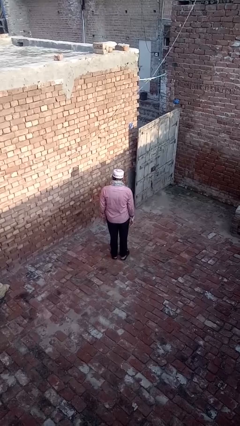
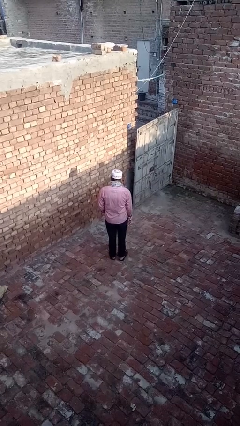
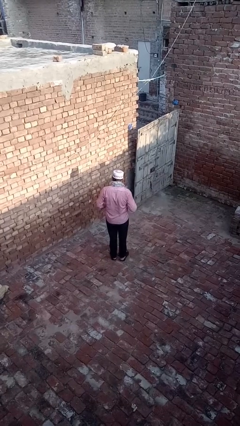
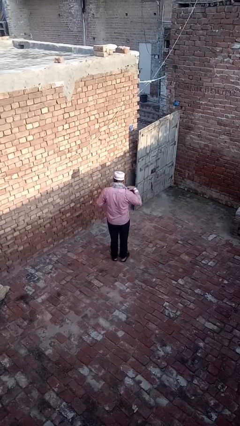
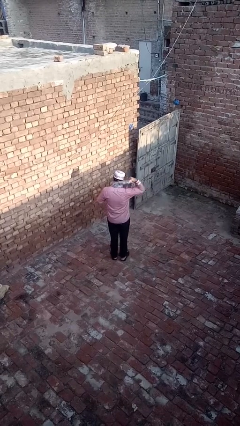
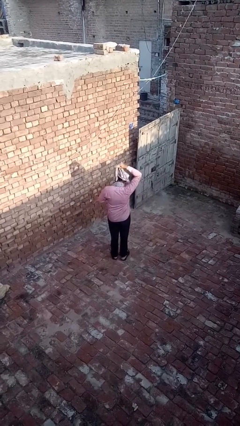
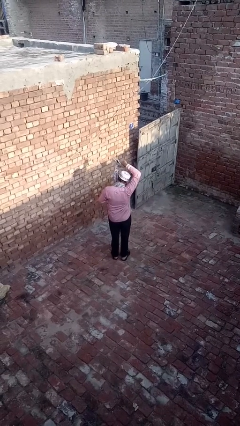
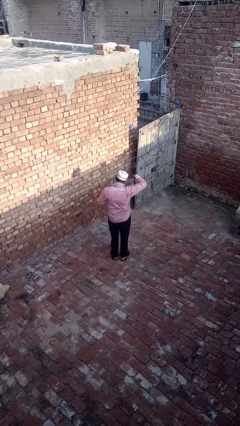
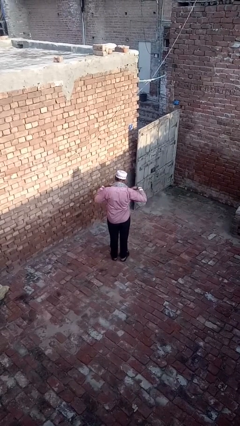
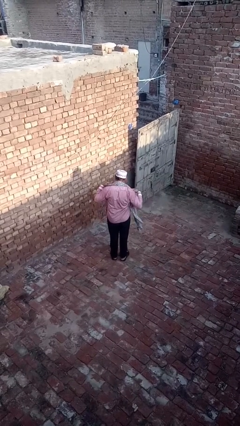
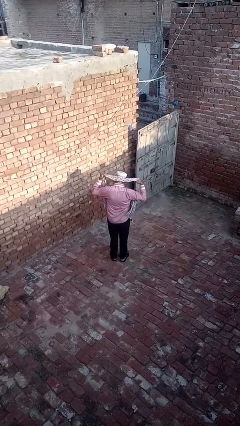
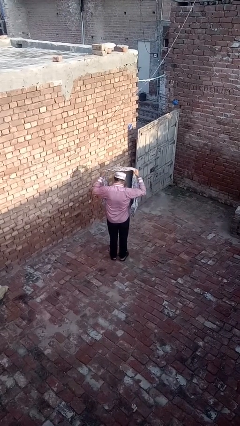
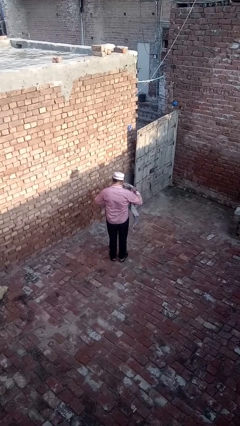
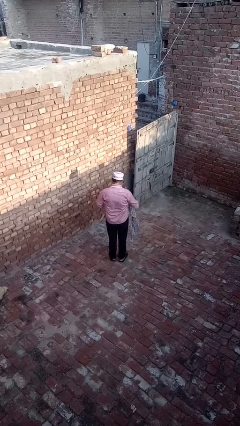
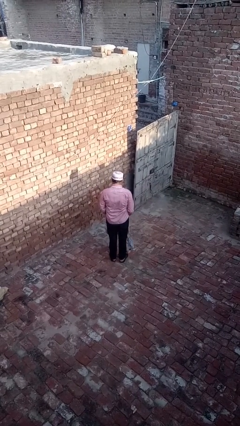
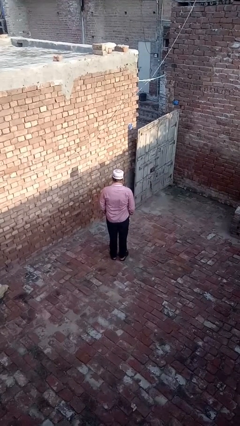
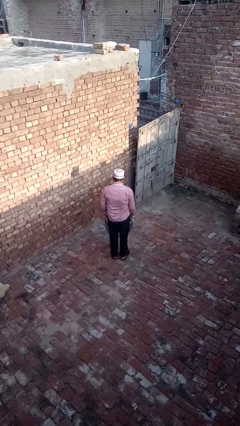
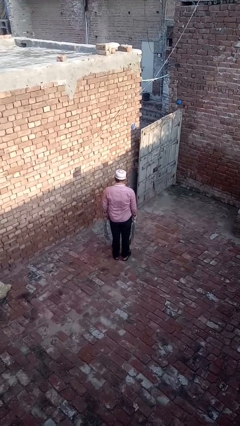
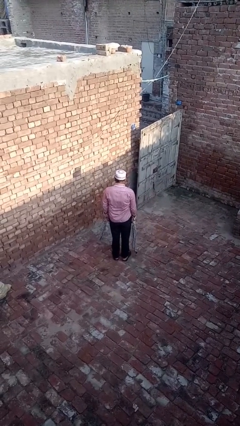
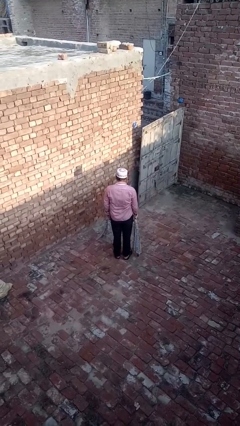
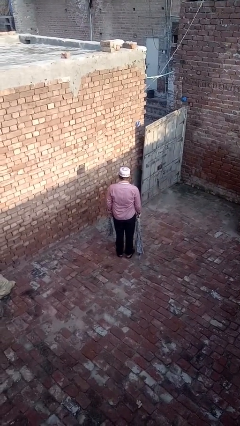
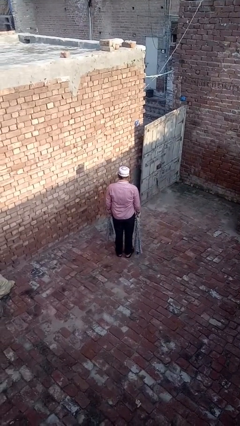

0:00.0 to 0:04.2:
person takes off scarf

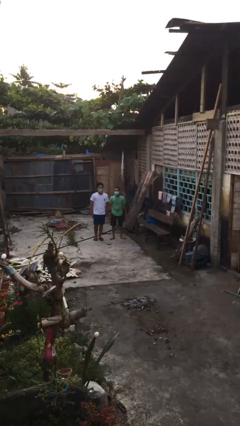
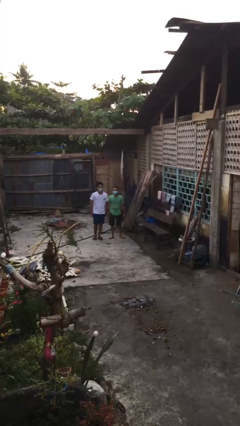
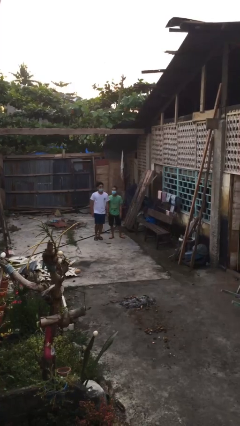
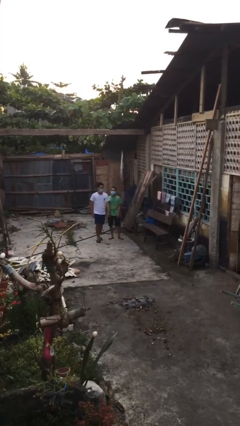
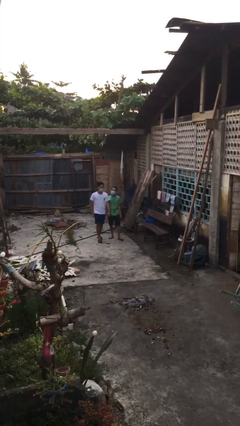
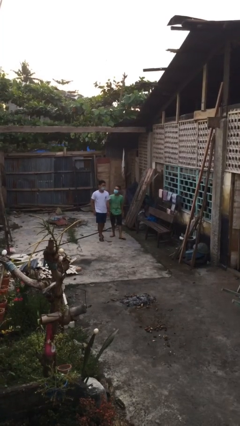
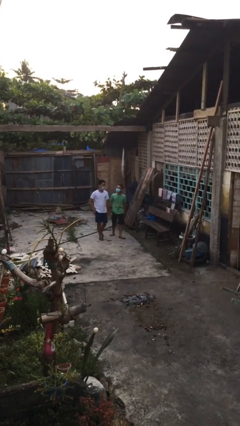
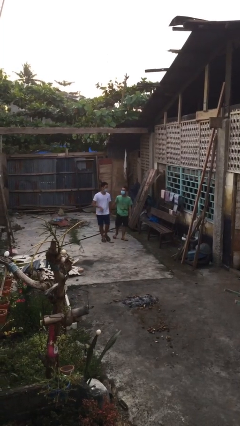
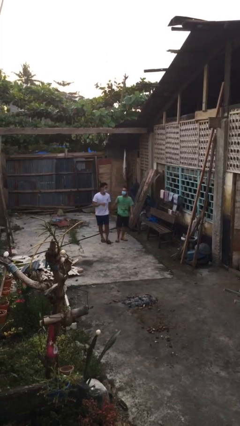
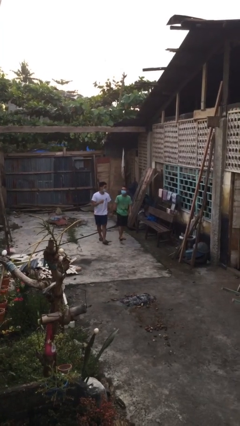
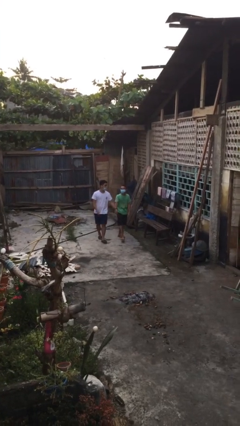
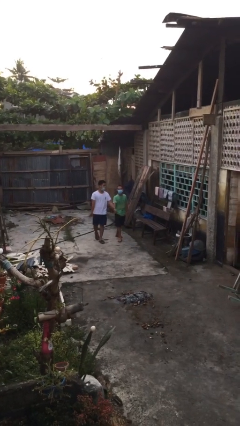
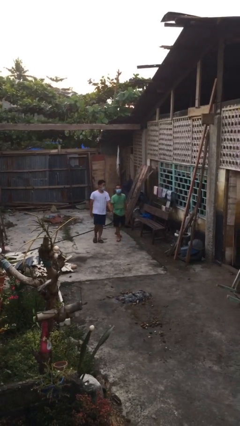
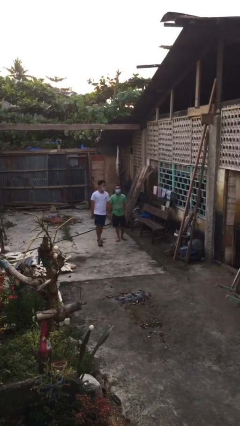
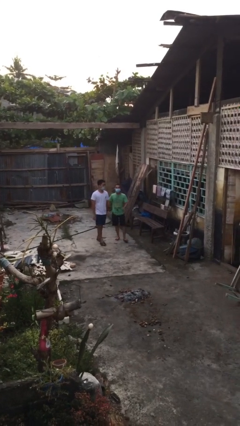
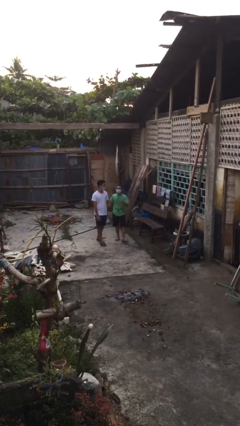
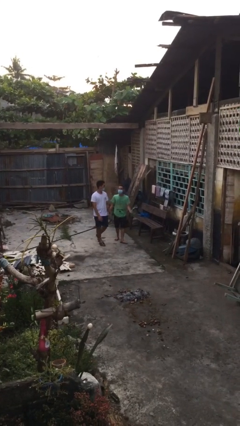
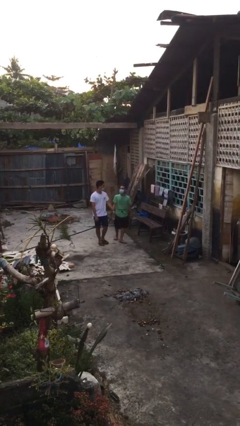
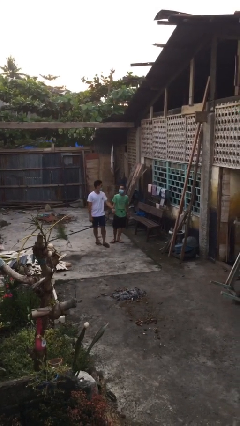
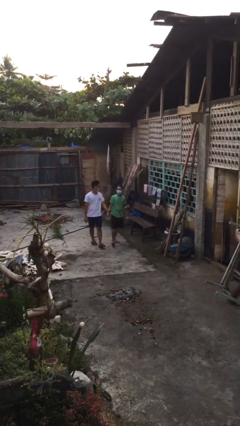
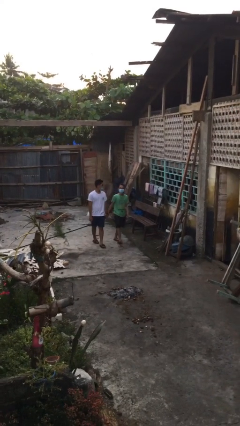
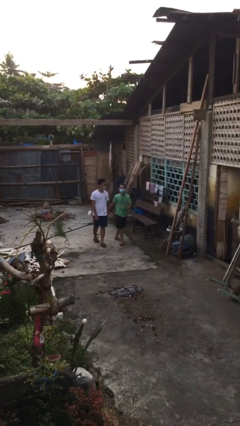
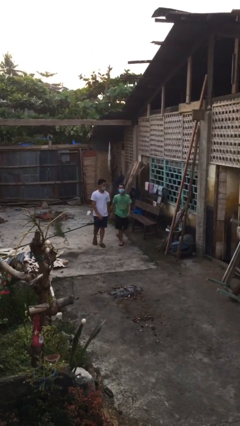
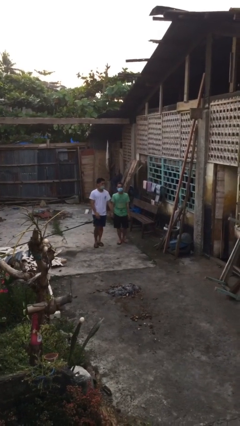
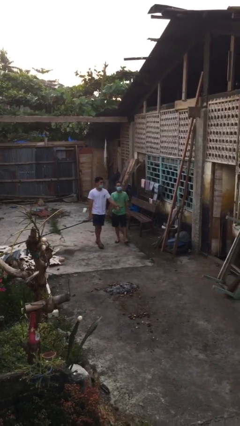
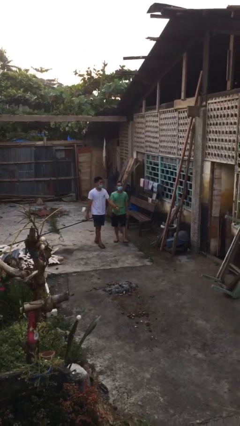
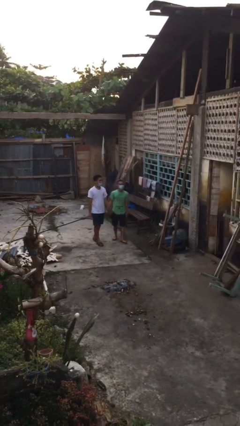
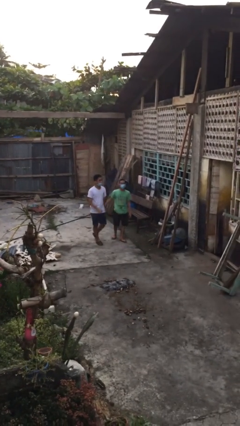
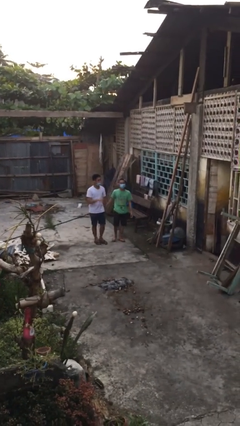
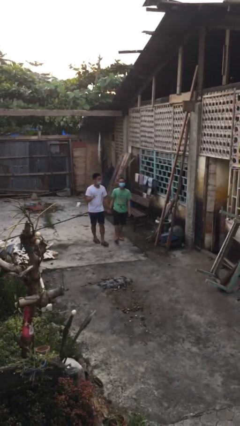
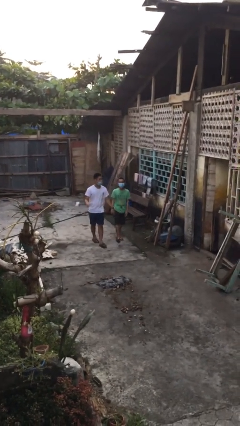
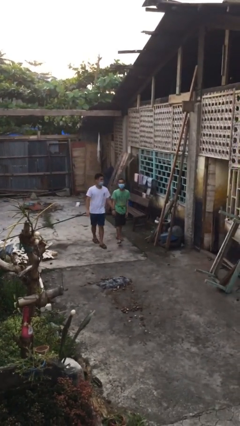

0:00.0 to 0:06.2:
person holds hand

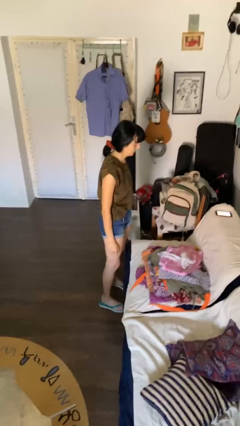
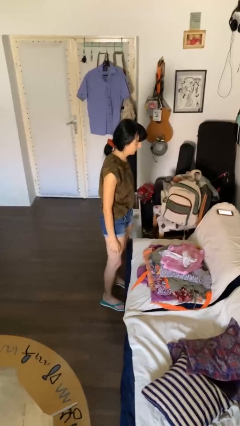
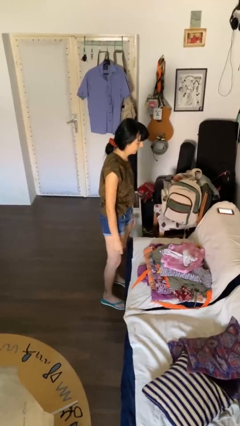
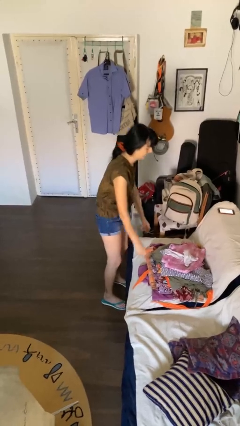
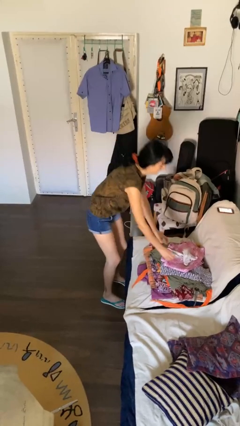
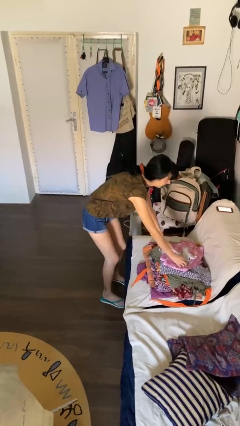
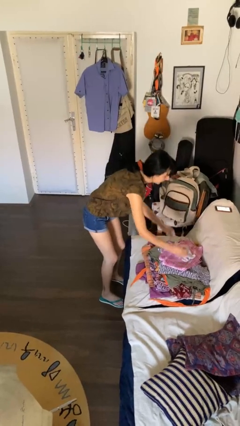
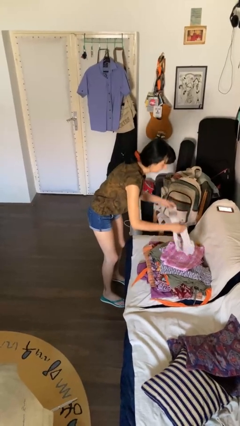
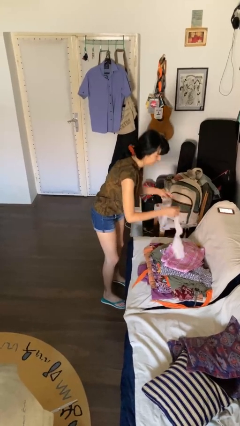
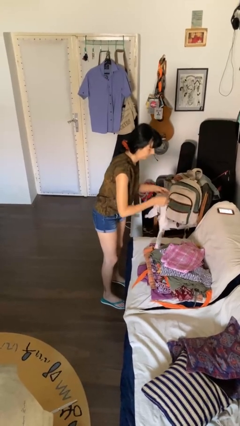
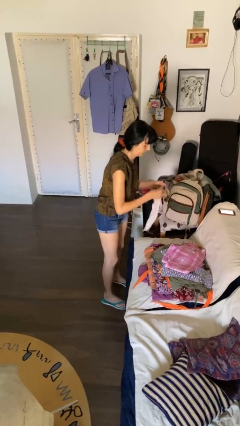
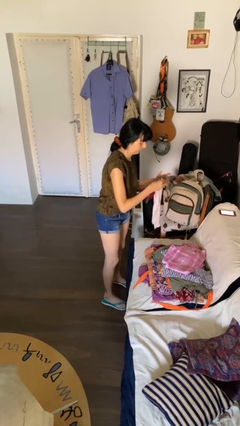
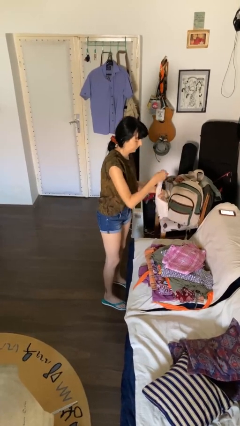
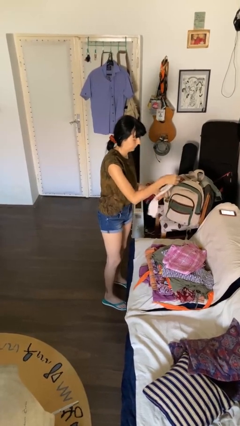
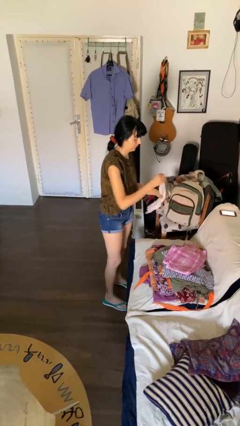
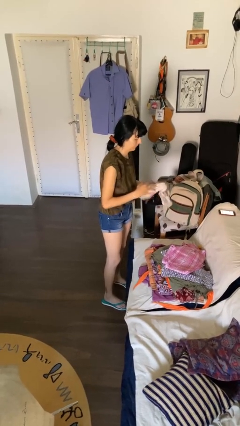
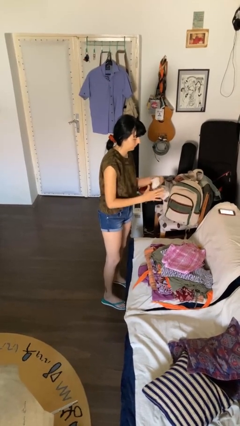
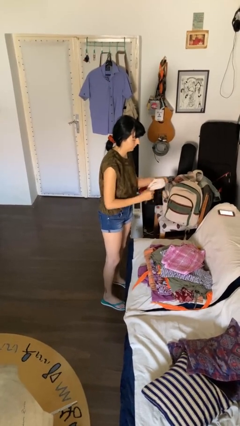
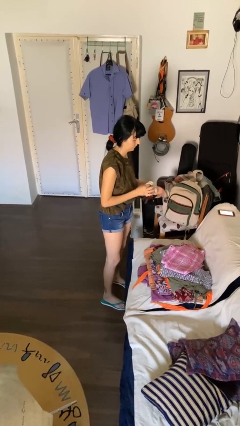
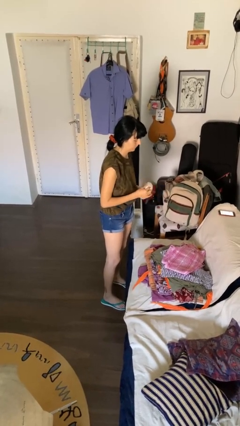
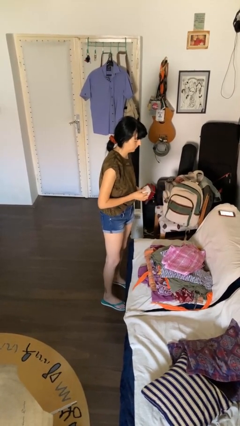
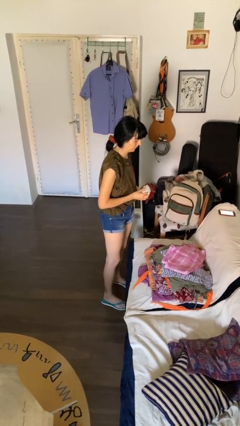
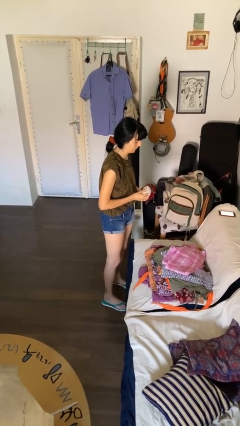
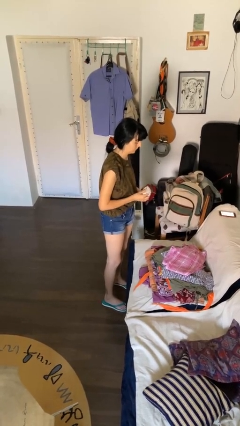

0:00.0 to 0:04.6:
person folds socks

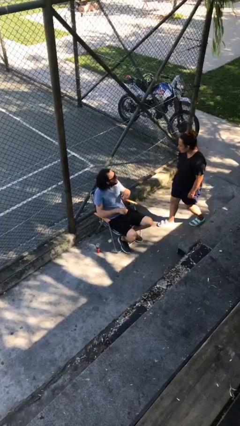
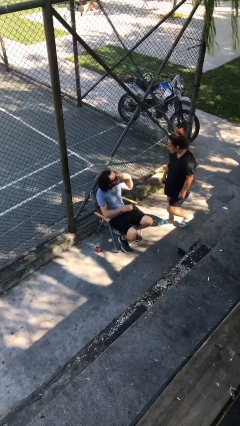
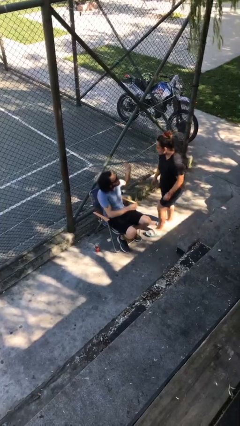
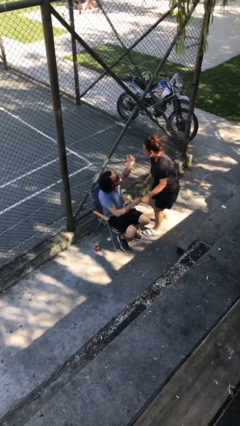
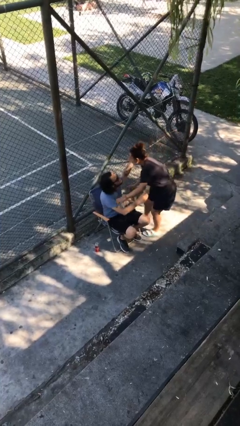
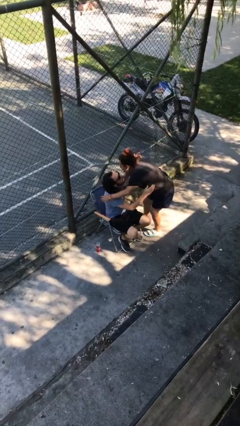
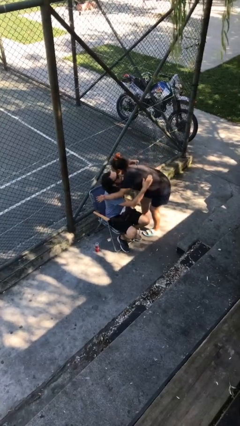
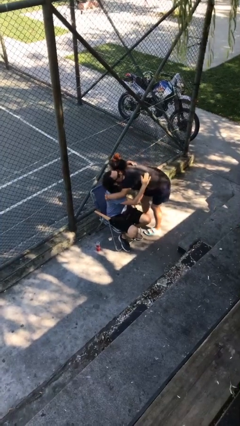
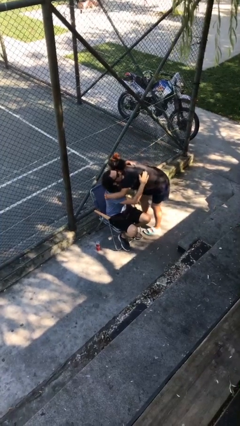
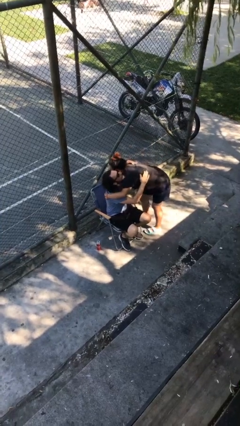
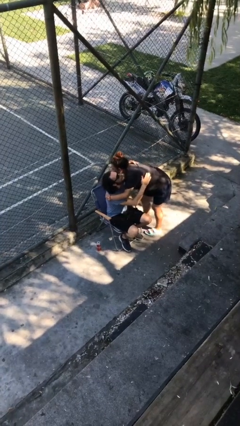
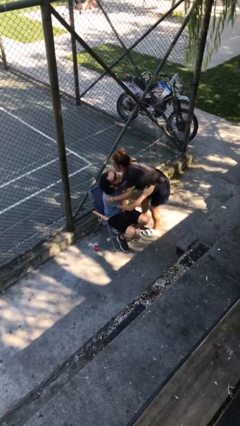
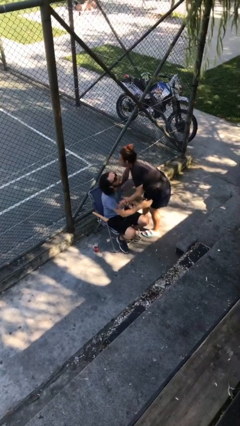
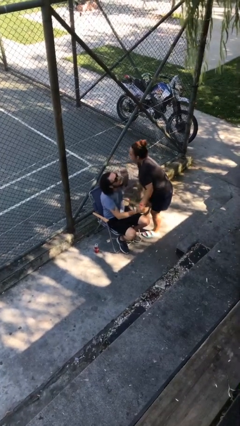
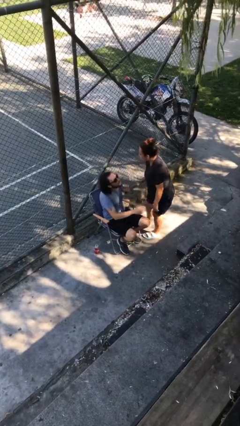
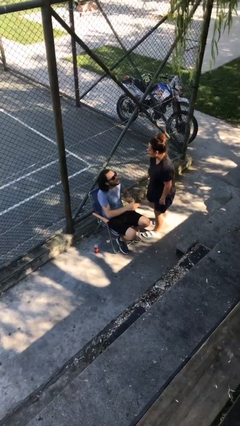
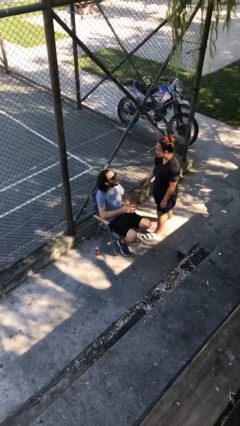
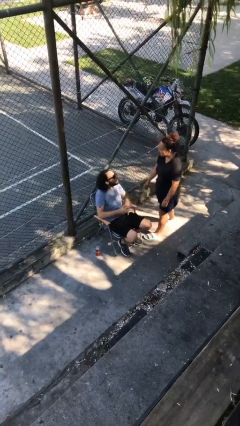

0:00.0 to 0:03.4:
person embraces person
